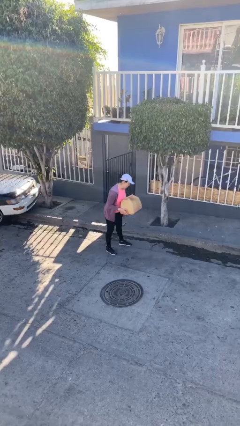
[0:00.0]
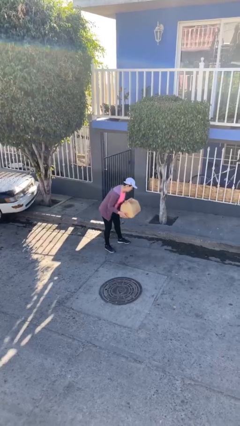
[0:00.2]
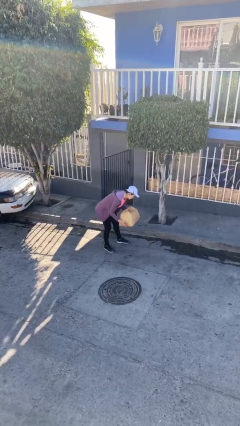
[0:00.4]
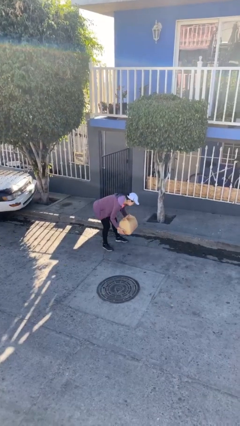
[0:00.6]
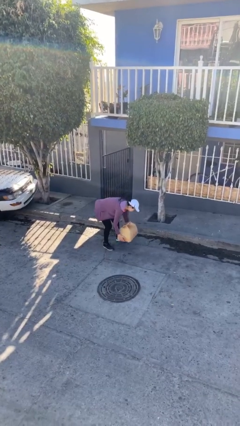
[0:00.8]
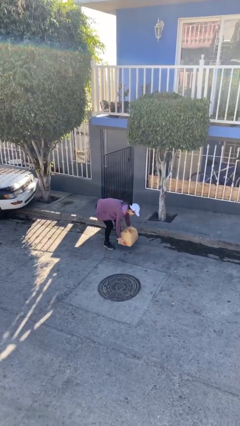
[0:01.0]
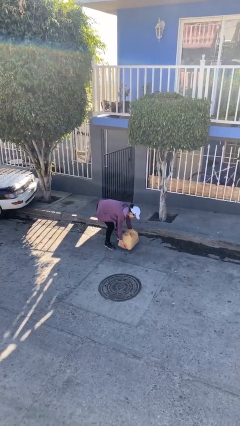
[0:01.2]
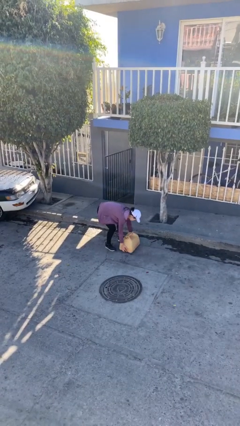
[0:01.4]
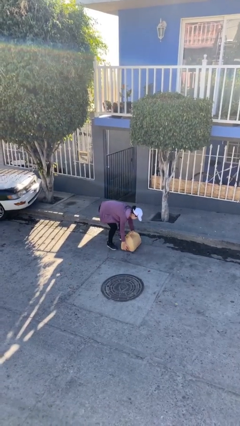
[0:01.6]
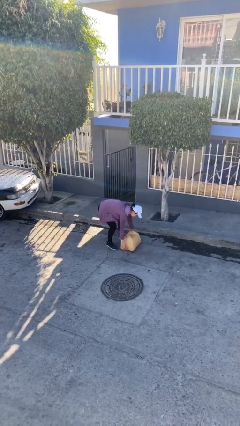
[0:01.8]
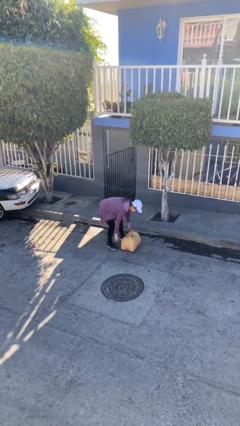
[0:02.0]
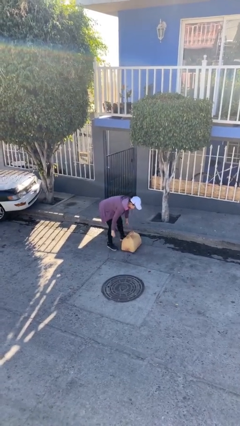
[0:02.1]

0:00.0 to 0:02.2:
person puts down object on floor

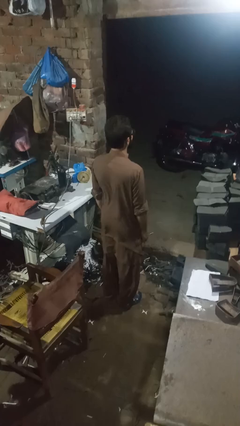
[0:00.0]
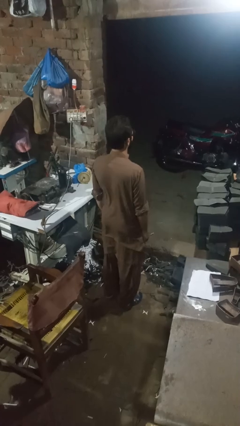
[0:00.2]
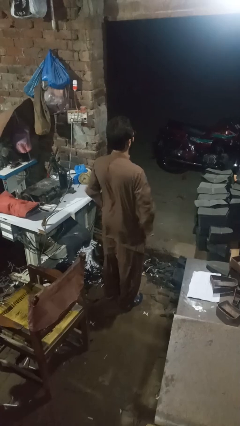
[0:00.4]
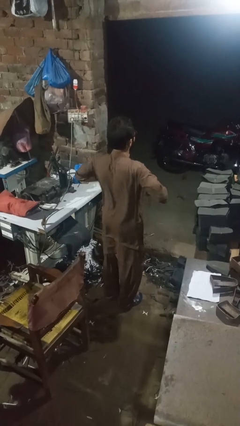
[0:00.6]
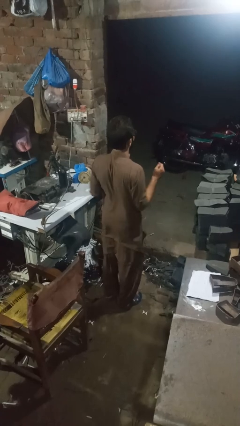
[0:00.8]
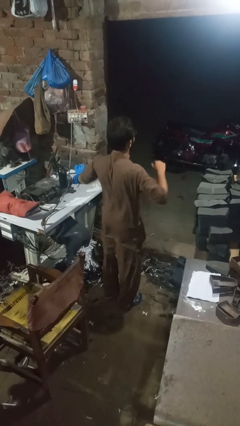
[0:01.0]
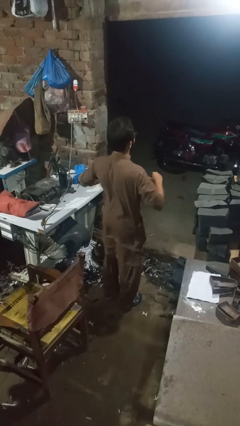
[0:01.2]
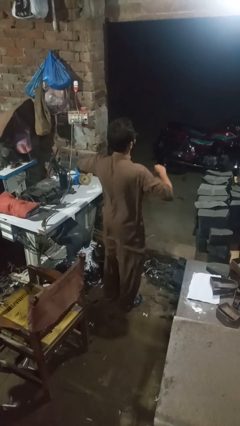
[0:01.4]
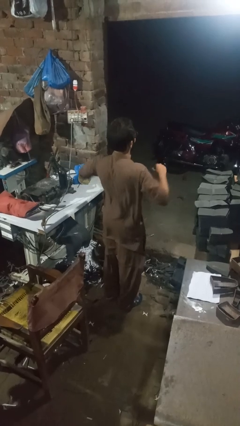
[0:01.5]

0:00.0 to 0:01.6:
person dances in place

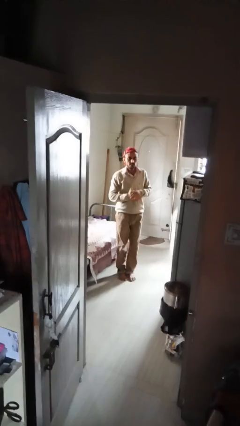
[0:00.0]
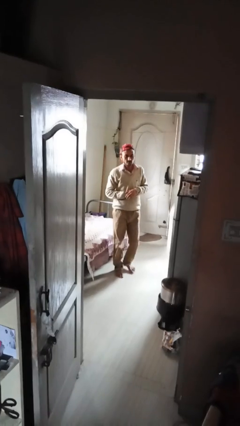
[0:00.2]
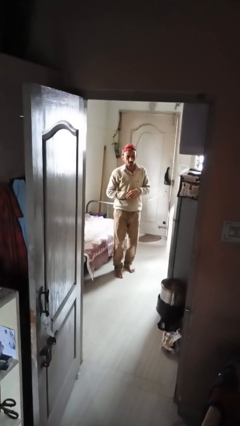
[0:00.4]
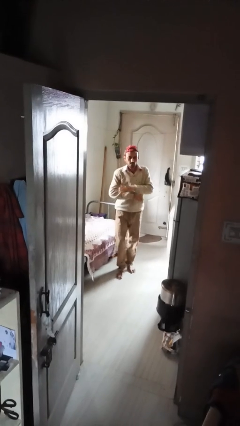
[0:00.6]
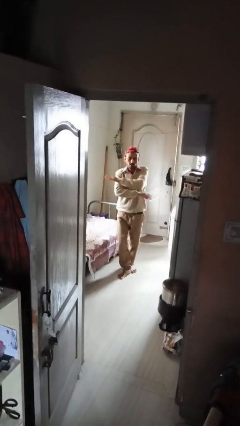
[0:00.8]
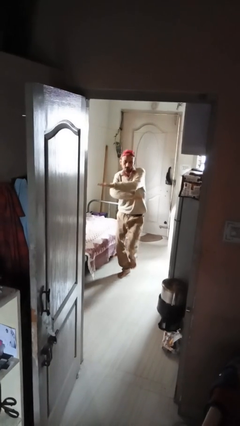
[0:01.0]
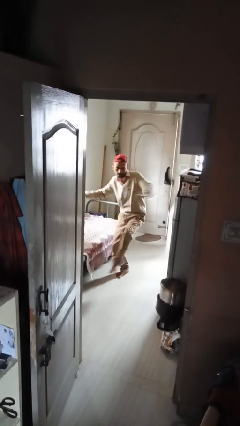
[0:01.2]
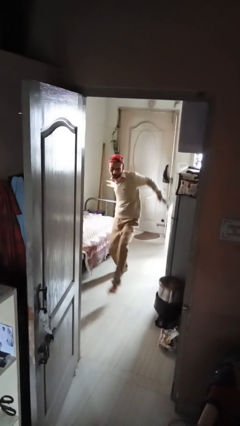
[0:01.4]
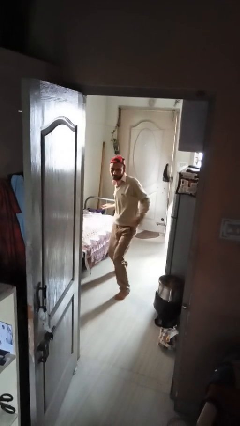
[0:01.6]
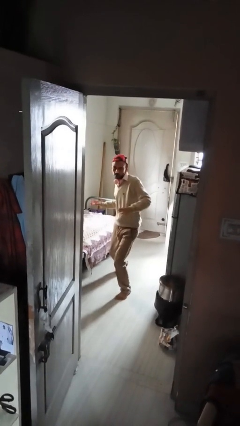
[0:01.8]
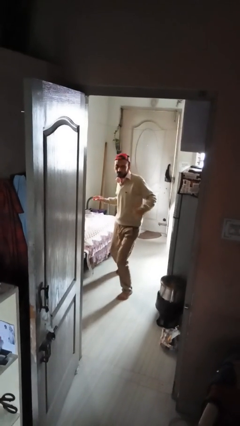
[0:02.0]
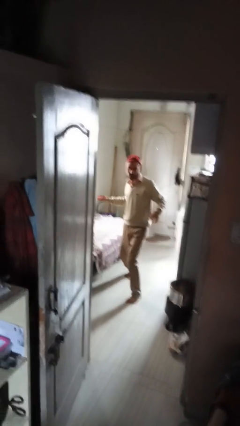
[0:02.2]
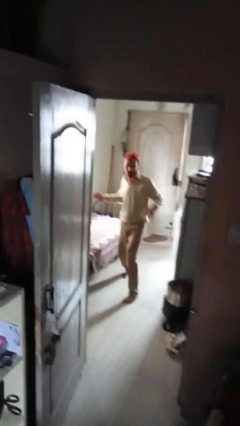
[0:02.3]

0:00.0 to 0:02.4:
person karate chop

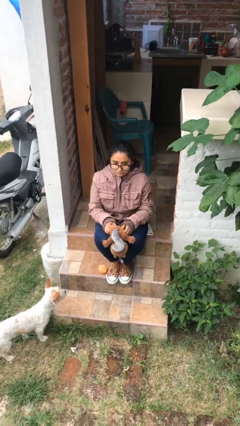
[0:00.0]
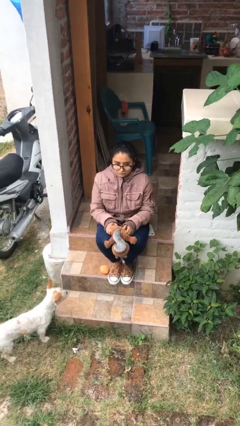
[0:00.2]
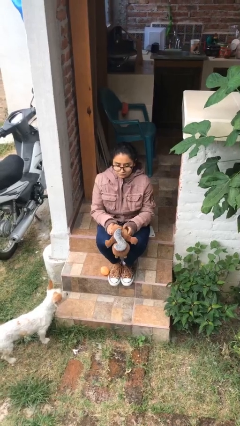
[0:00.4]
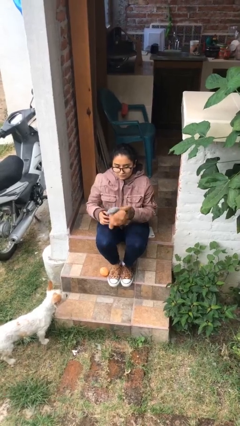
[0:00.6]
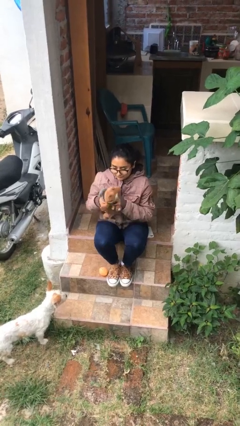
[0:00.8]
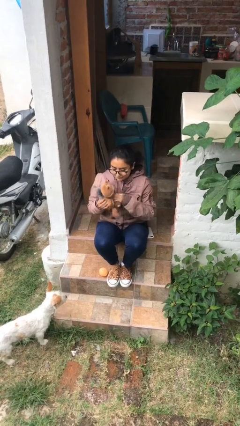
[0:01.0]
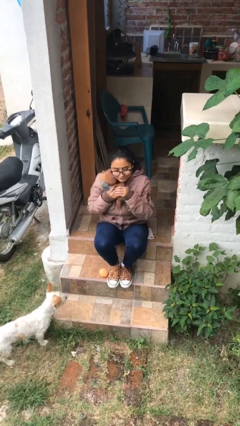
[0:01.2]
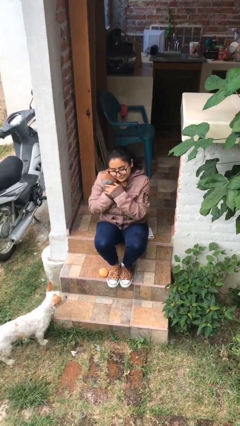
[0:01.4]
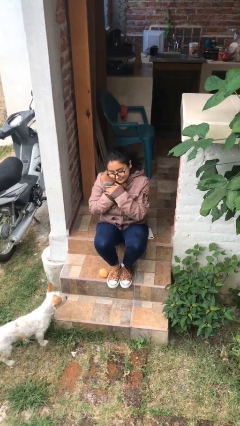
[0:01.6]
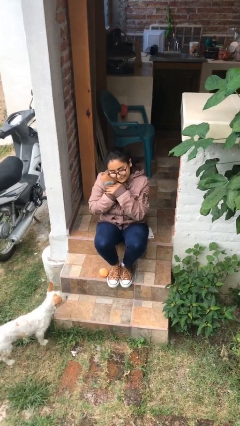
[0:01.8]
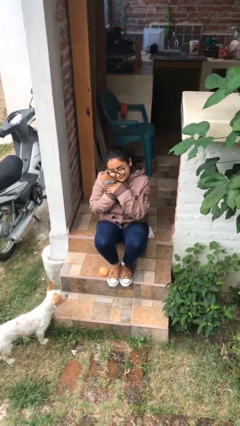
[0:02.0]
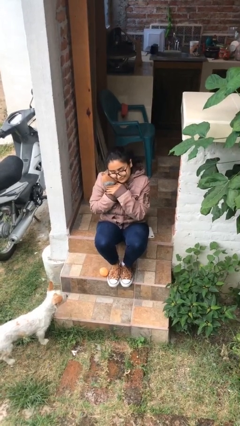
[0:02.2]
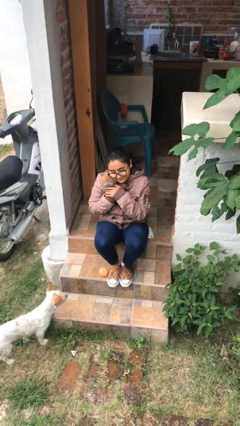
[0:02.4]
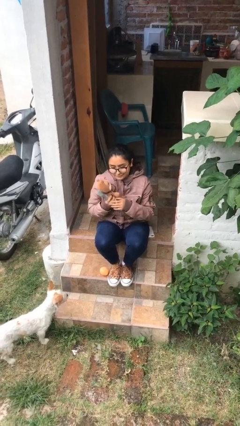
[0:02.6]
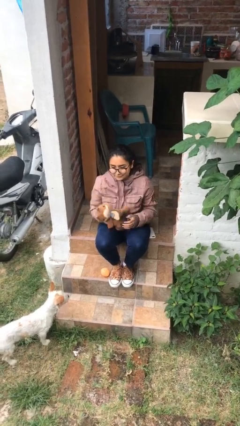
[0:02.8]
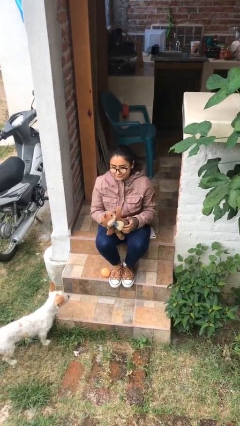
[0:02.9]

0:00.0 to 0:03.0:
person hugs stuffed animal

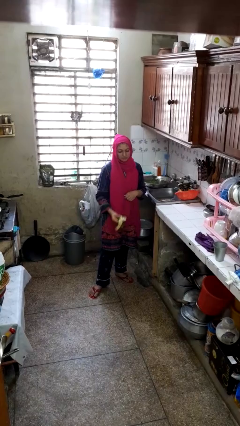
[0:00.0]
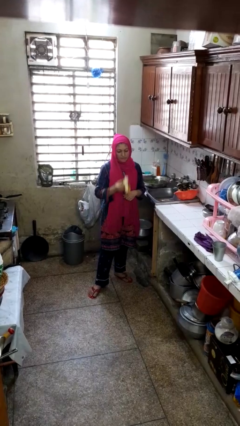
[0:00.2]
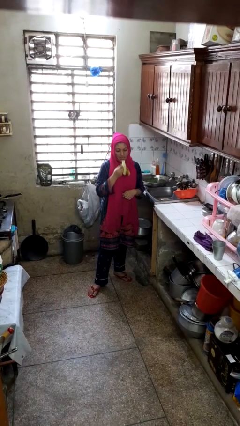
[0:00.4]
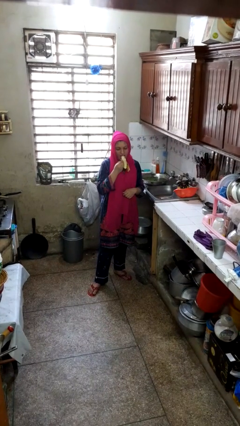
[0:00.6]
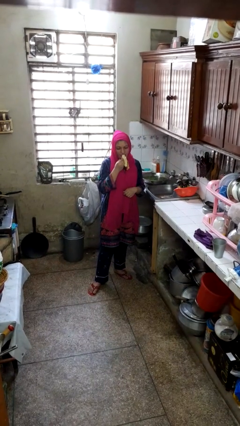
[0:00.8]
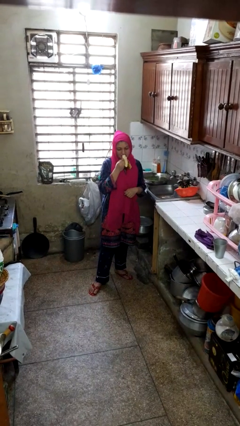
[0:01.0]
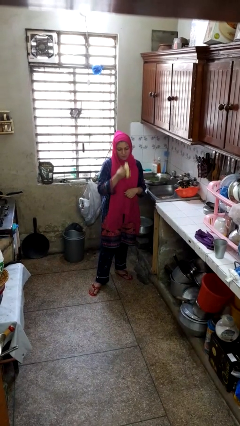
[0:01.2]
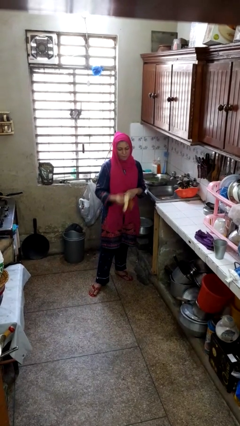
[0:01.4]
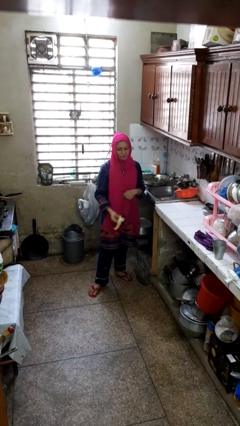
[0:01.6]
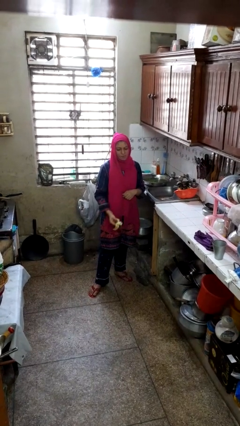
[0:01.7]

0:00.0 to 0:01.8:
person eats banana

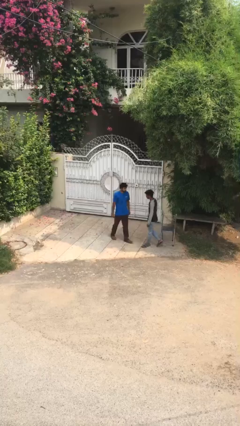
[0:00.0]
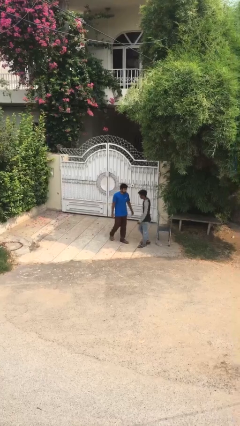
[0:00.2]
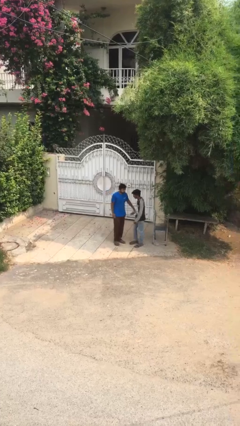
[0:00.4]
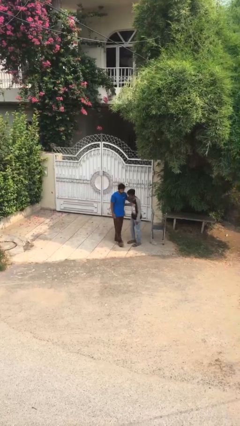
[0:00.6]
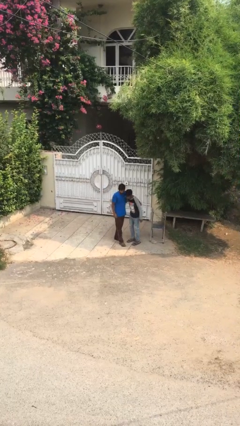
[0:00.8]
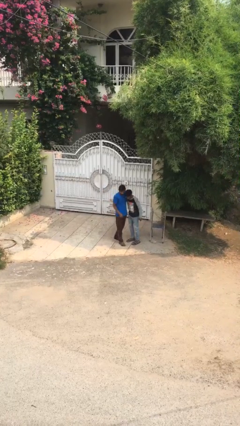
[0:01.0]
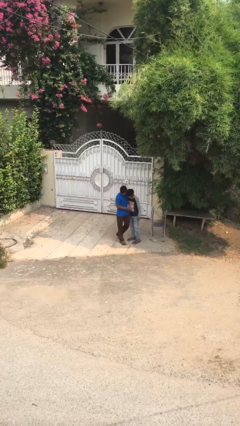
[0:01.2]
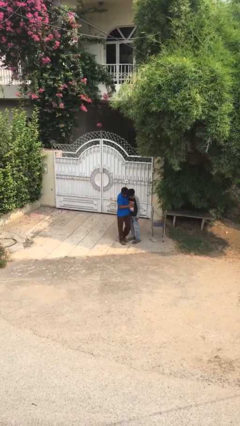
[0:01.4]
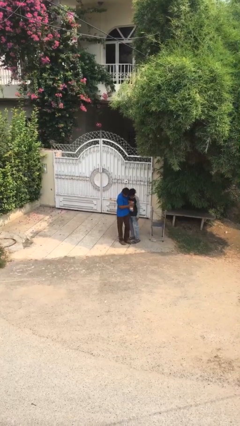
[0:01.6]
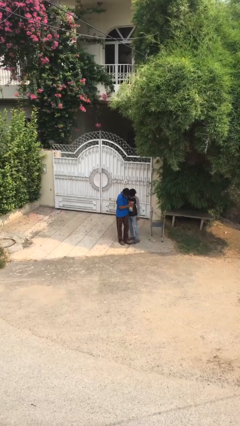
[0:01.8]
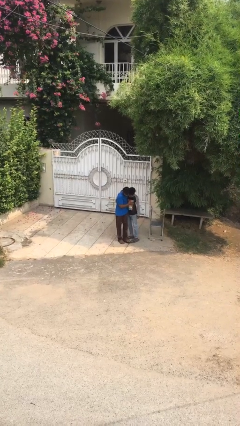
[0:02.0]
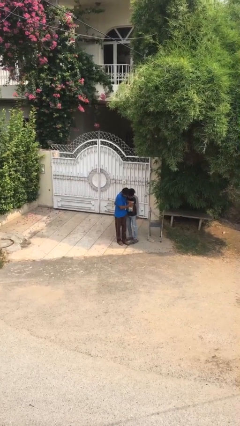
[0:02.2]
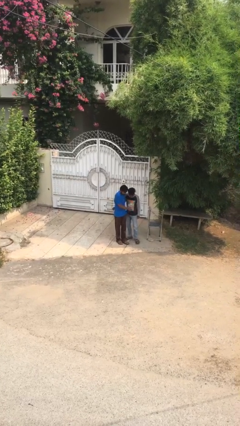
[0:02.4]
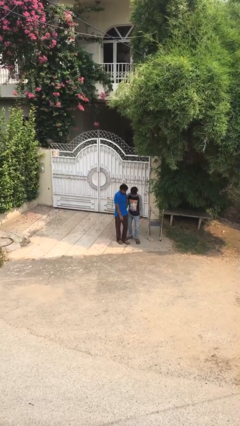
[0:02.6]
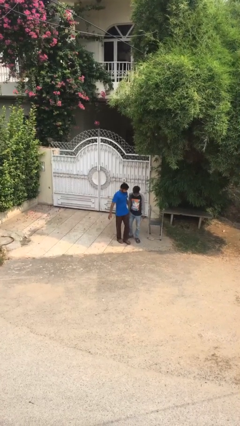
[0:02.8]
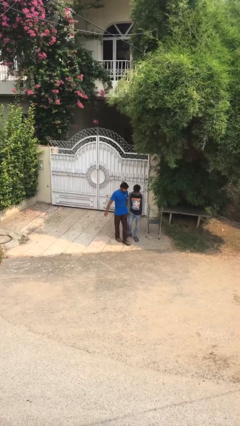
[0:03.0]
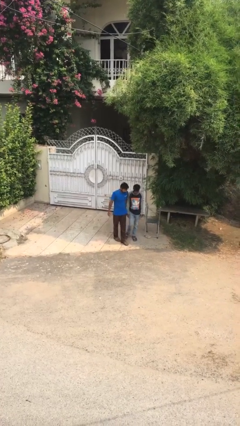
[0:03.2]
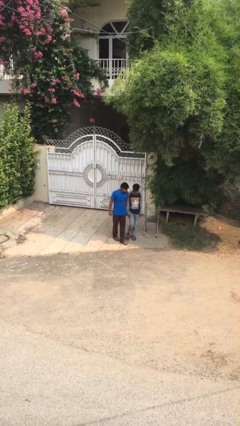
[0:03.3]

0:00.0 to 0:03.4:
person embraces person

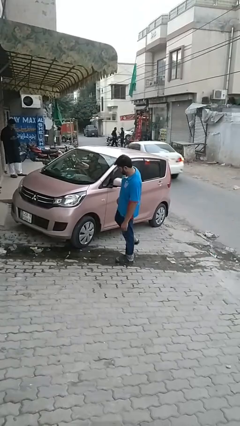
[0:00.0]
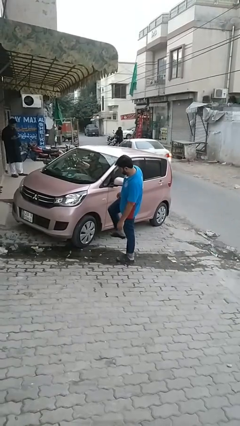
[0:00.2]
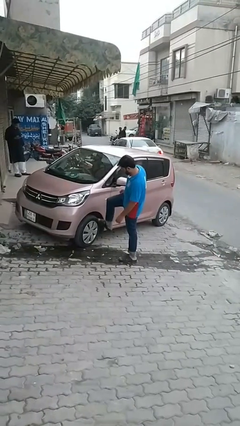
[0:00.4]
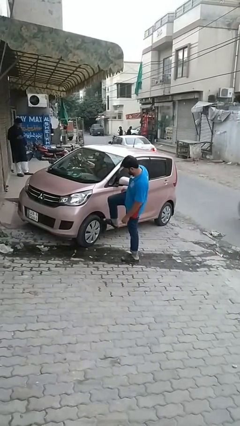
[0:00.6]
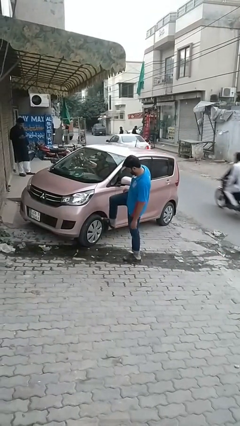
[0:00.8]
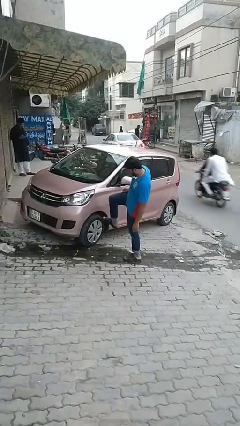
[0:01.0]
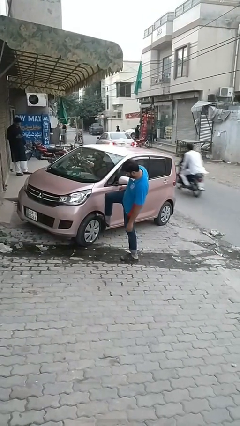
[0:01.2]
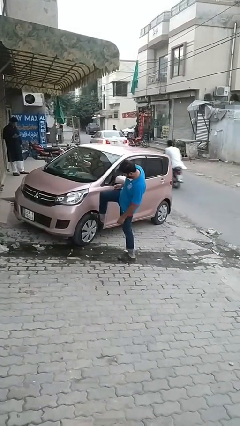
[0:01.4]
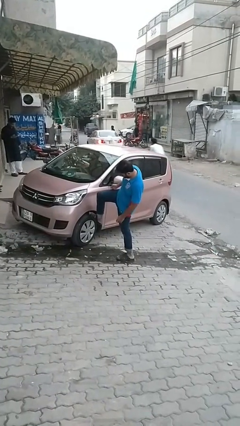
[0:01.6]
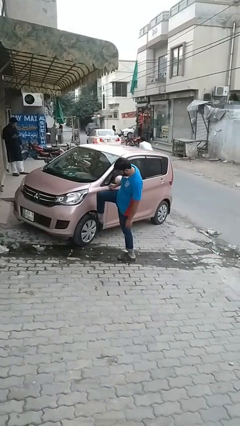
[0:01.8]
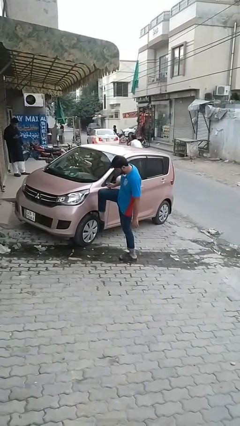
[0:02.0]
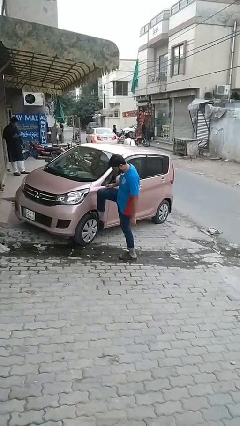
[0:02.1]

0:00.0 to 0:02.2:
person kicks car tires

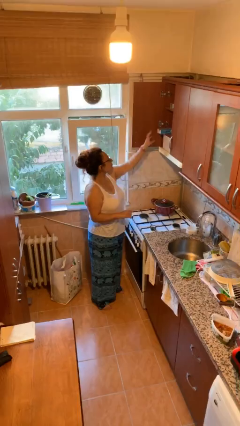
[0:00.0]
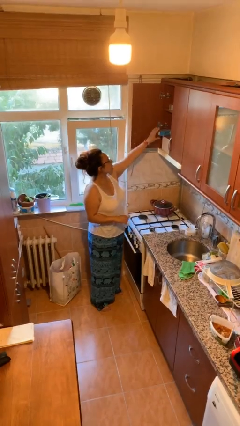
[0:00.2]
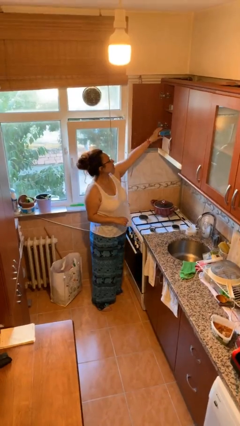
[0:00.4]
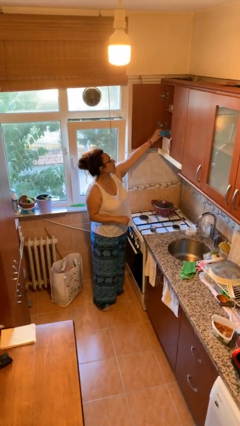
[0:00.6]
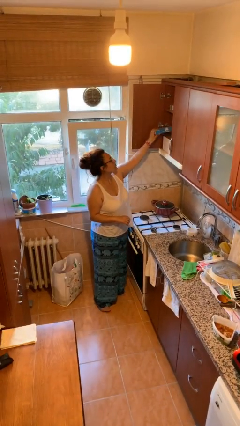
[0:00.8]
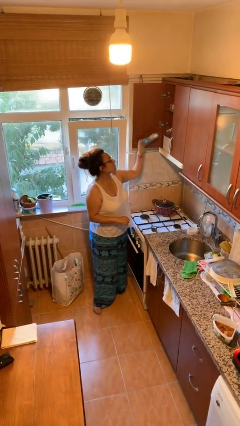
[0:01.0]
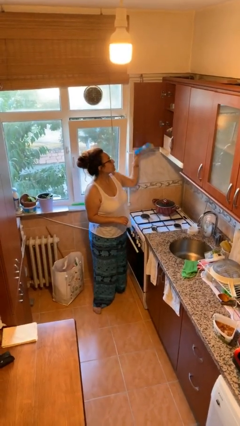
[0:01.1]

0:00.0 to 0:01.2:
person picks up object from shelf
